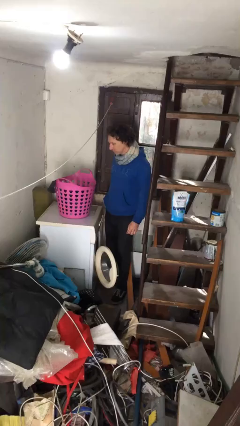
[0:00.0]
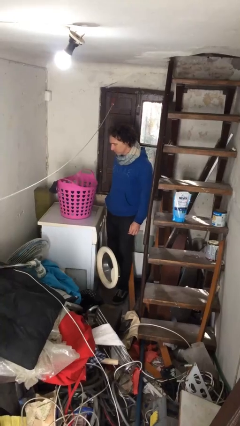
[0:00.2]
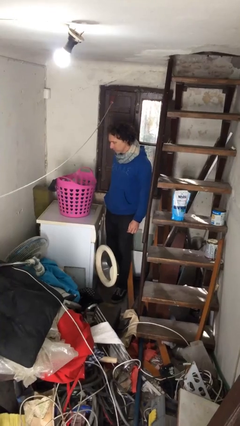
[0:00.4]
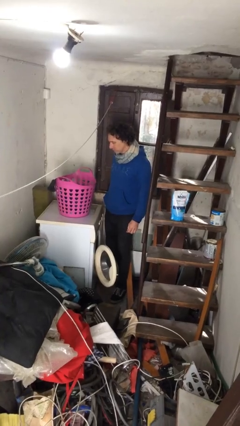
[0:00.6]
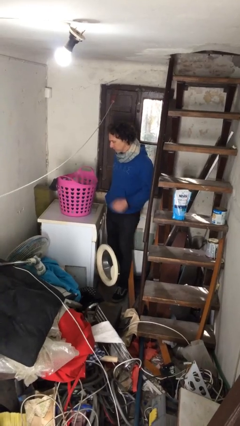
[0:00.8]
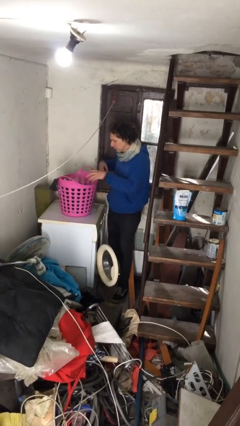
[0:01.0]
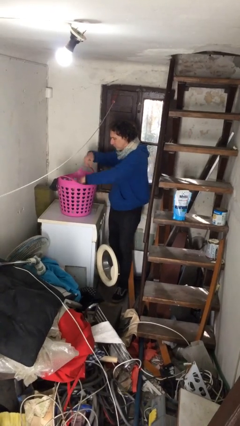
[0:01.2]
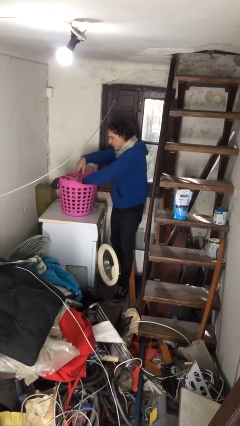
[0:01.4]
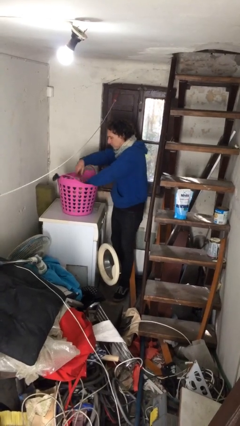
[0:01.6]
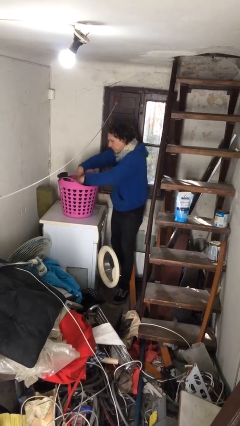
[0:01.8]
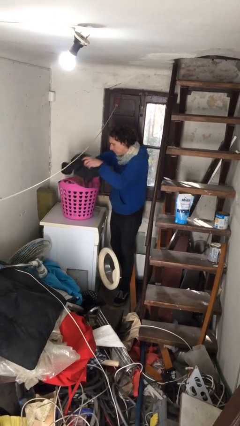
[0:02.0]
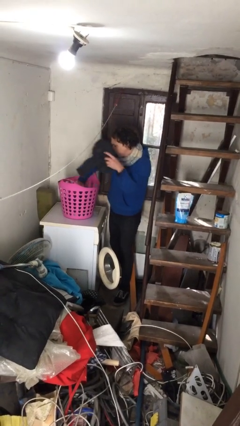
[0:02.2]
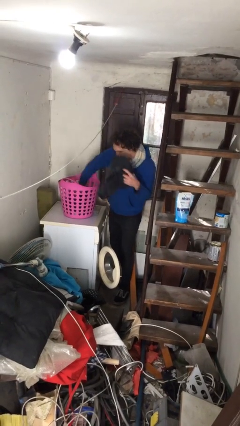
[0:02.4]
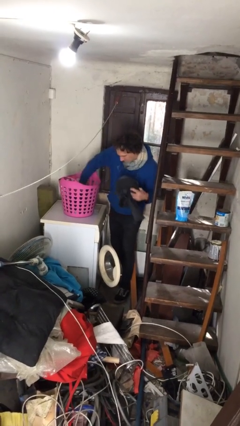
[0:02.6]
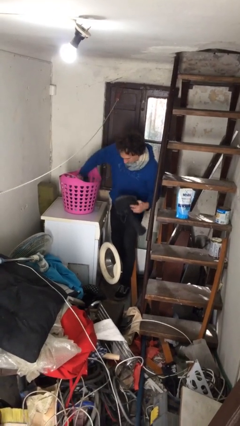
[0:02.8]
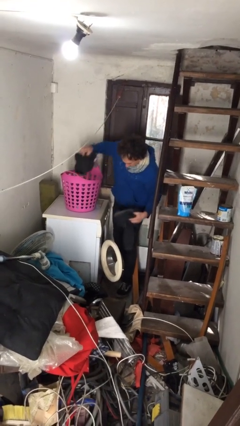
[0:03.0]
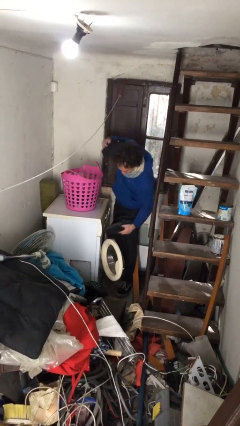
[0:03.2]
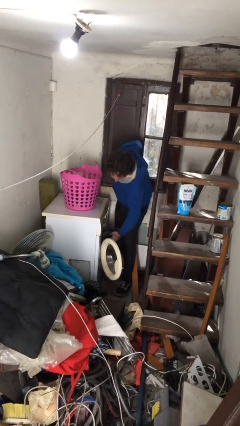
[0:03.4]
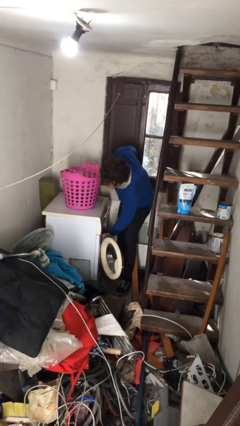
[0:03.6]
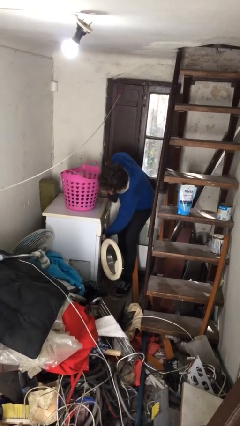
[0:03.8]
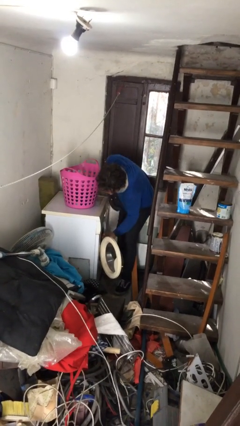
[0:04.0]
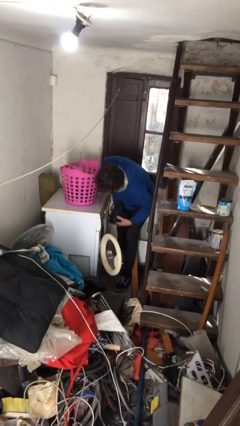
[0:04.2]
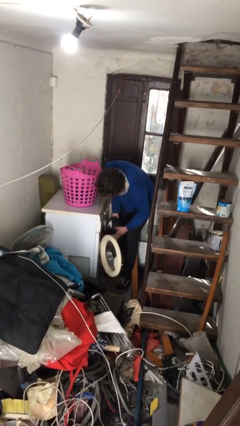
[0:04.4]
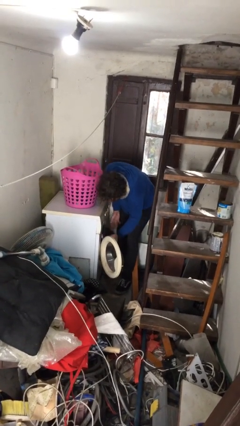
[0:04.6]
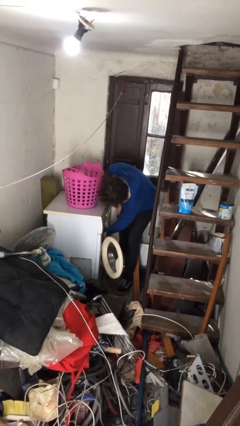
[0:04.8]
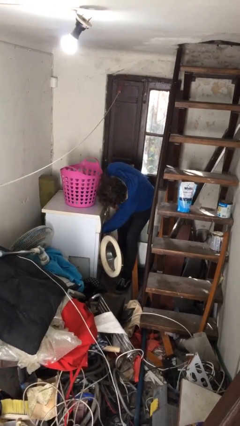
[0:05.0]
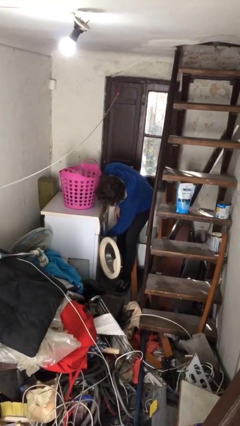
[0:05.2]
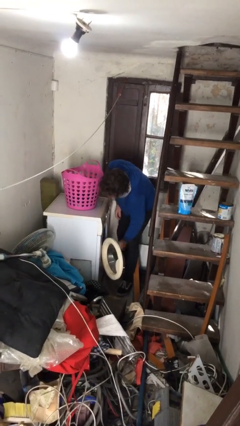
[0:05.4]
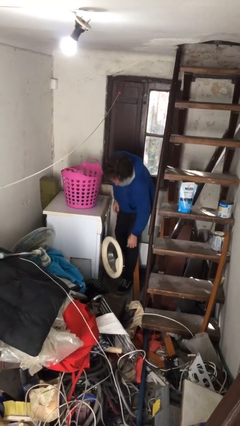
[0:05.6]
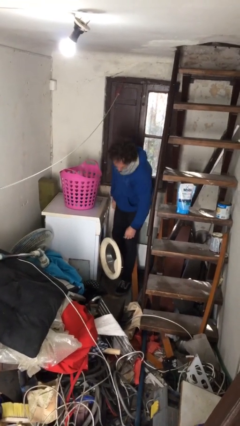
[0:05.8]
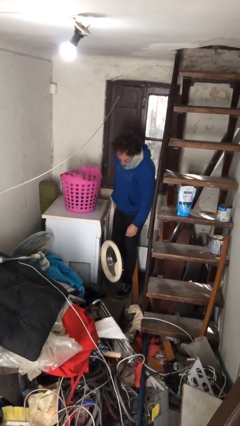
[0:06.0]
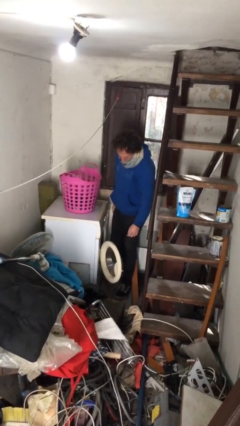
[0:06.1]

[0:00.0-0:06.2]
person loads clotheswasher

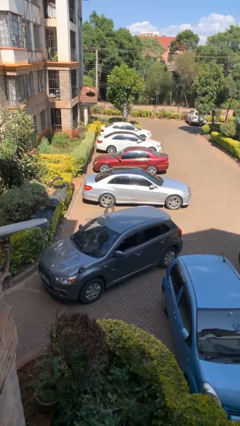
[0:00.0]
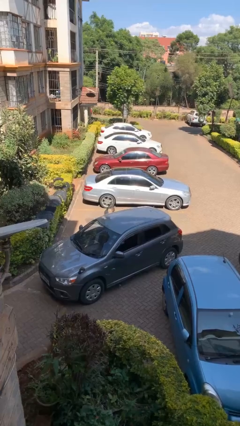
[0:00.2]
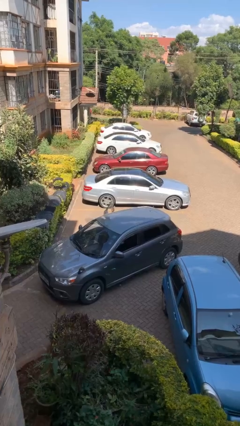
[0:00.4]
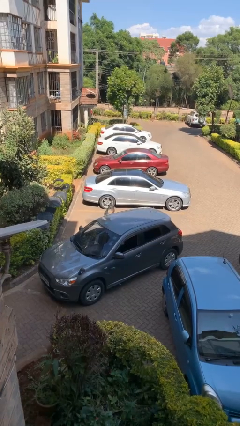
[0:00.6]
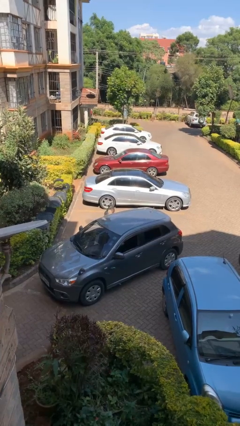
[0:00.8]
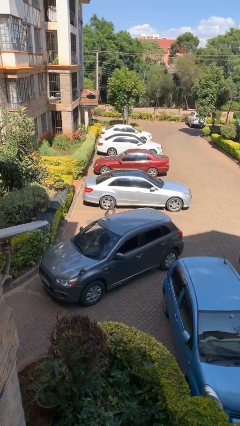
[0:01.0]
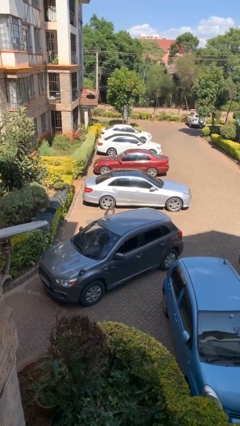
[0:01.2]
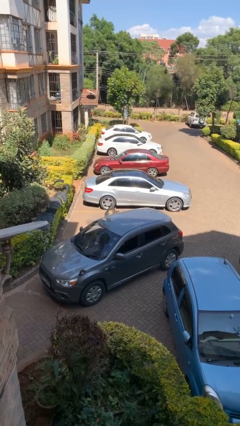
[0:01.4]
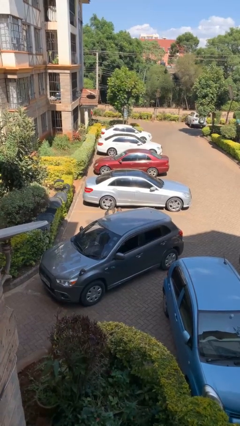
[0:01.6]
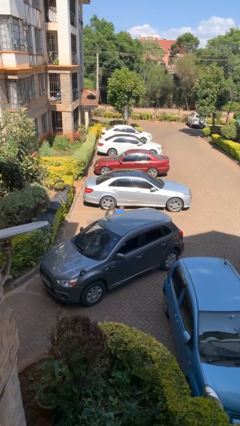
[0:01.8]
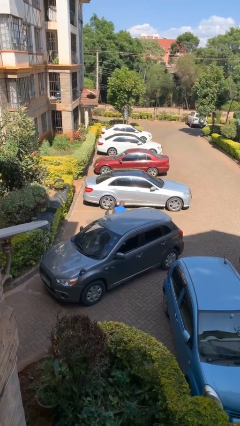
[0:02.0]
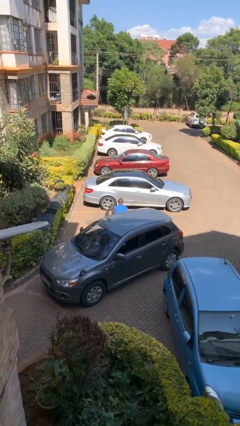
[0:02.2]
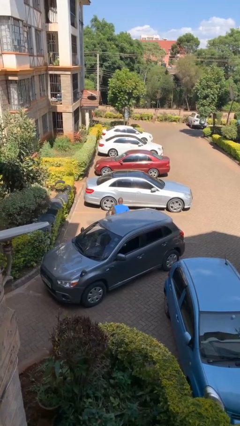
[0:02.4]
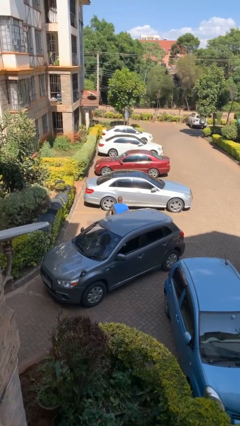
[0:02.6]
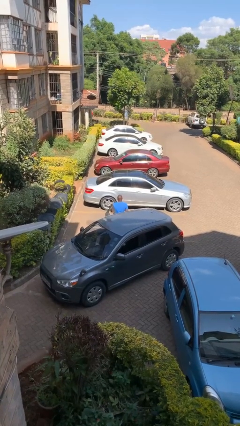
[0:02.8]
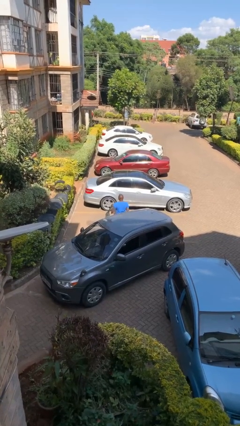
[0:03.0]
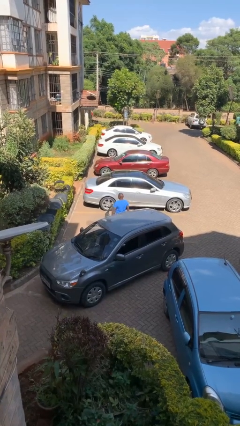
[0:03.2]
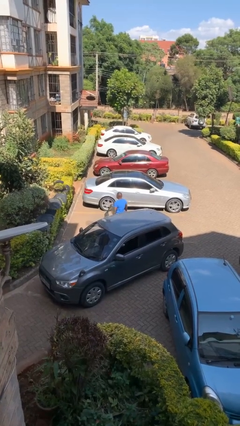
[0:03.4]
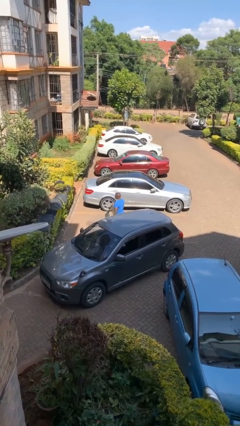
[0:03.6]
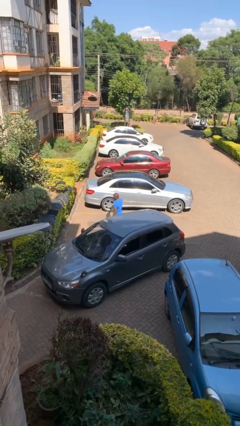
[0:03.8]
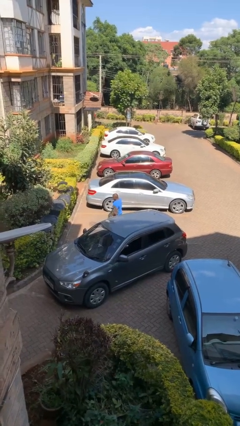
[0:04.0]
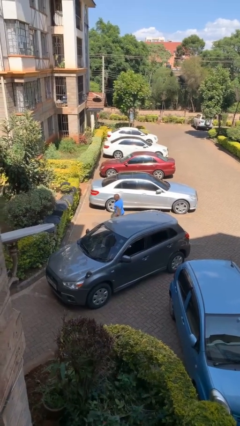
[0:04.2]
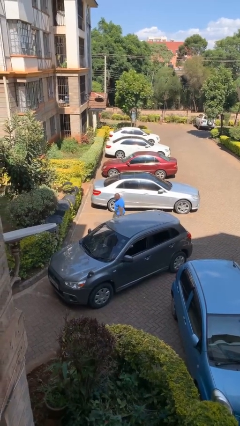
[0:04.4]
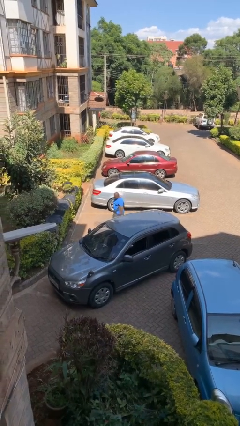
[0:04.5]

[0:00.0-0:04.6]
person exits car

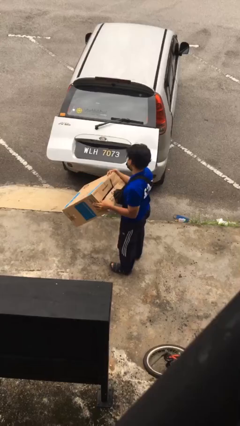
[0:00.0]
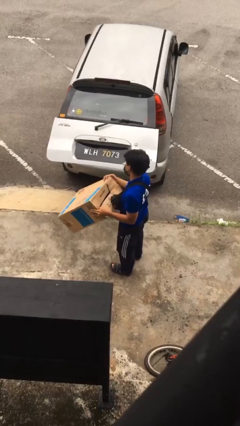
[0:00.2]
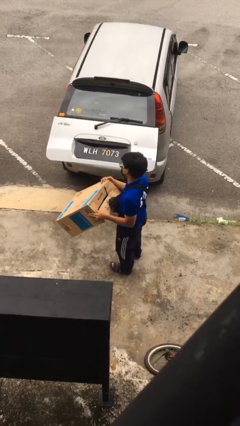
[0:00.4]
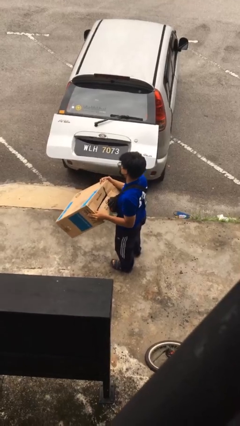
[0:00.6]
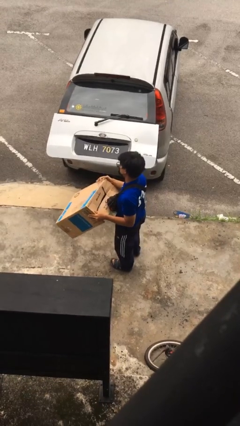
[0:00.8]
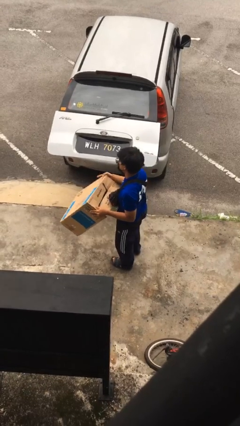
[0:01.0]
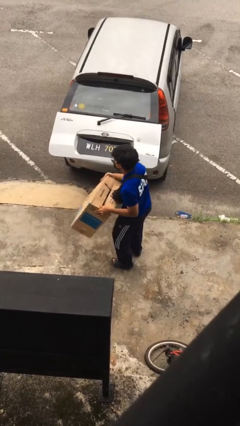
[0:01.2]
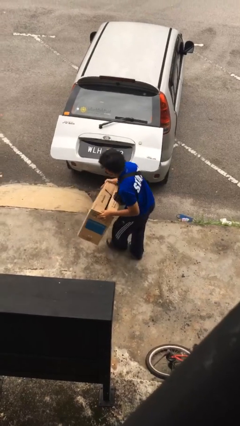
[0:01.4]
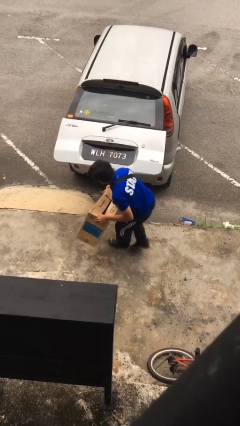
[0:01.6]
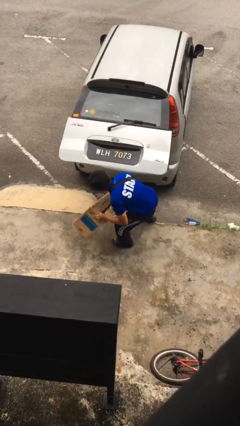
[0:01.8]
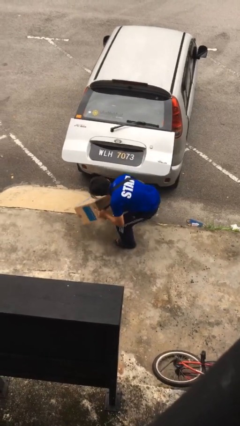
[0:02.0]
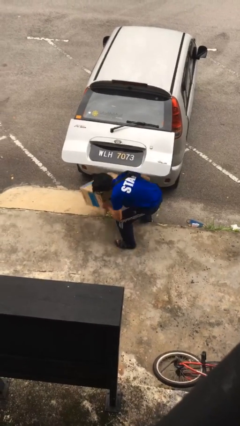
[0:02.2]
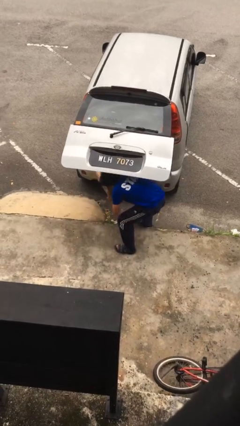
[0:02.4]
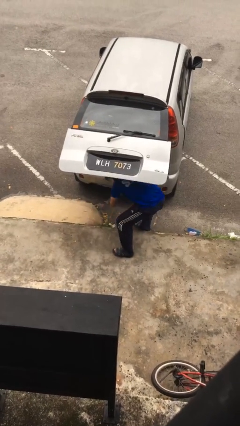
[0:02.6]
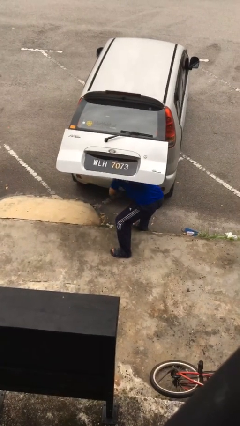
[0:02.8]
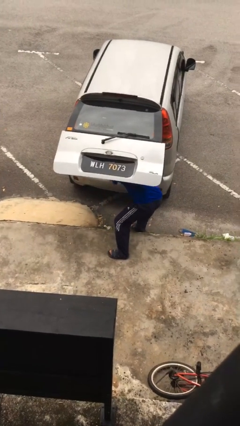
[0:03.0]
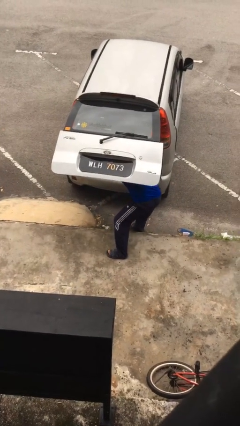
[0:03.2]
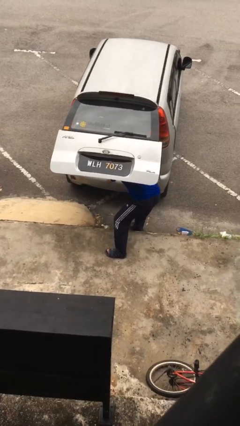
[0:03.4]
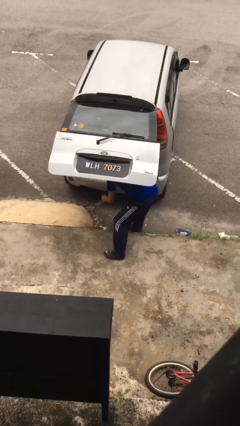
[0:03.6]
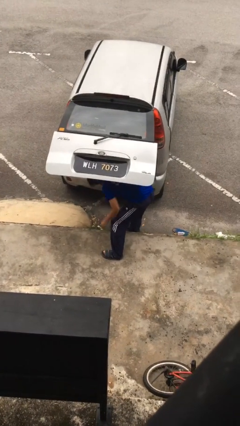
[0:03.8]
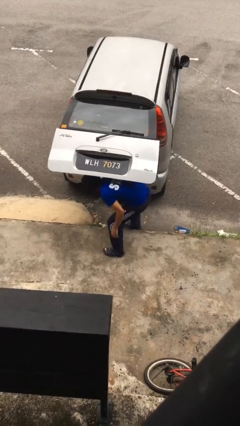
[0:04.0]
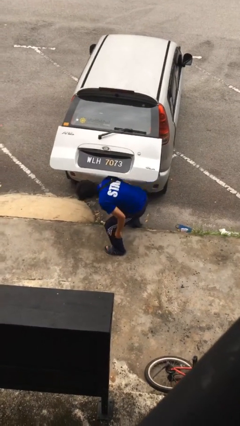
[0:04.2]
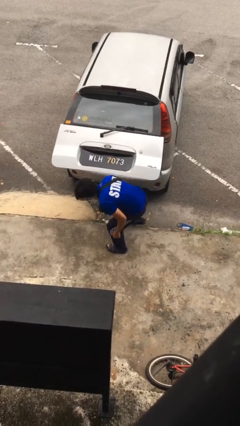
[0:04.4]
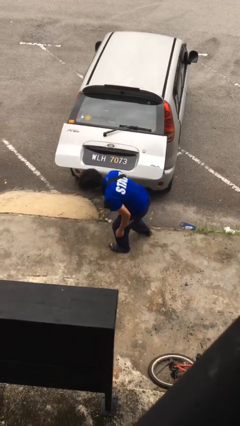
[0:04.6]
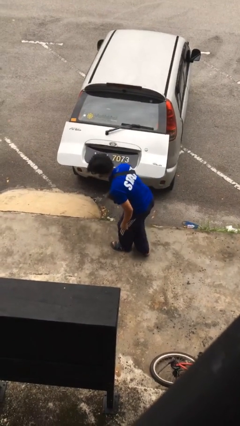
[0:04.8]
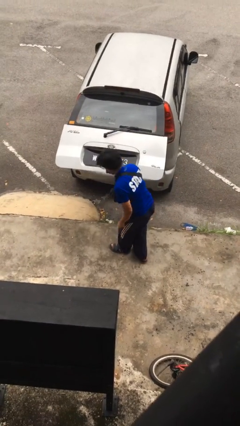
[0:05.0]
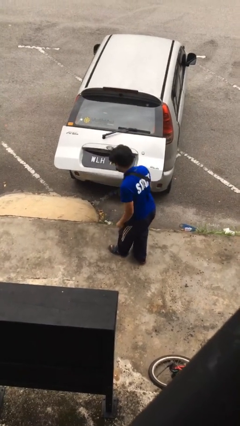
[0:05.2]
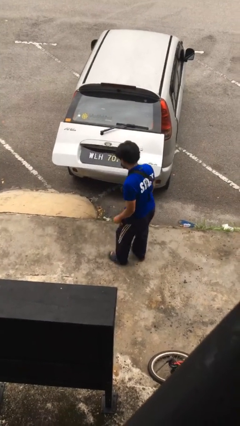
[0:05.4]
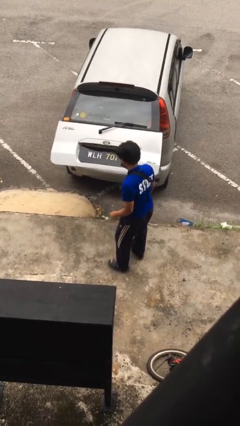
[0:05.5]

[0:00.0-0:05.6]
person loads car

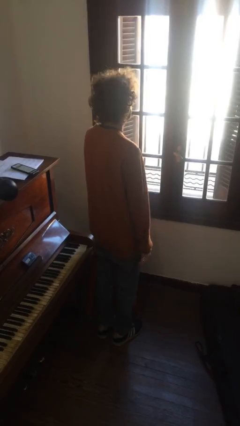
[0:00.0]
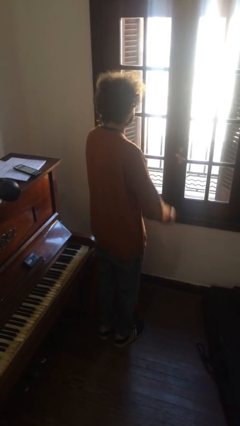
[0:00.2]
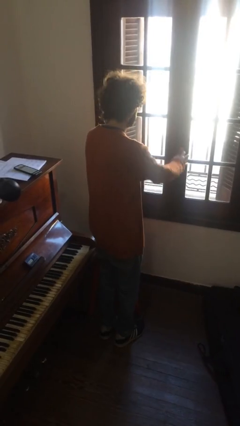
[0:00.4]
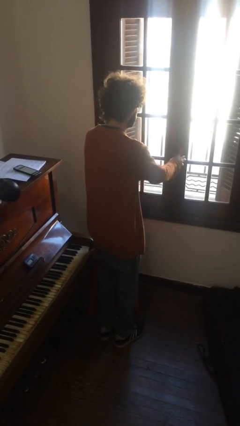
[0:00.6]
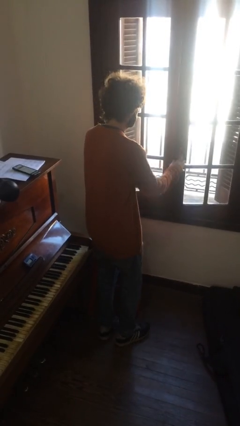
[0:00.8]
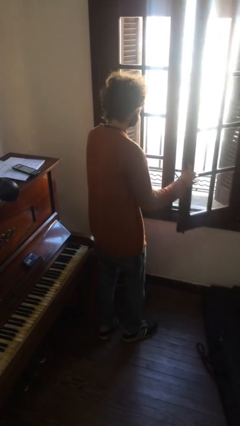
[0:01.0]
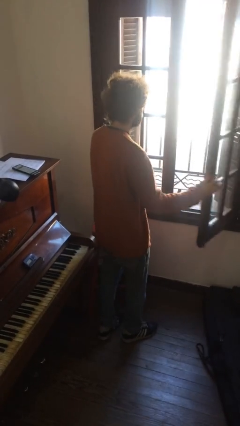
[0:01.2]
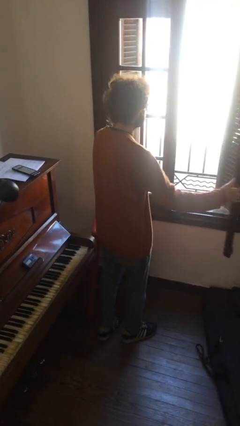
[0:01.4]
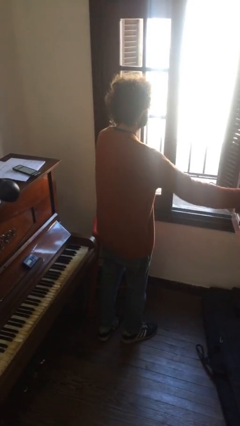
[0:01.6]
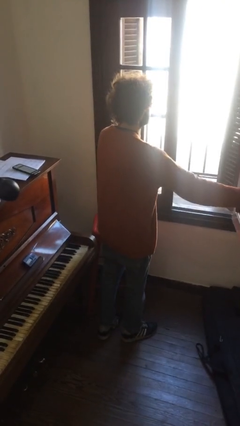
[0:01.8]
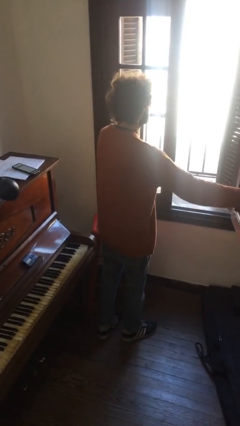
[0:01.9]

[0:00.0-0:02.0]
person opens home window
